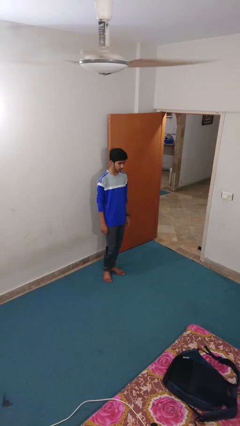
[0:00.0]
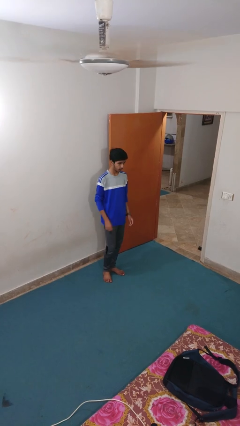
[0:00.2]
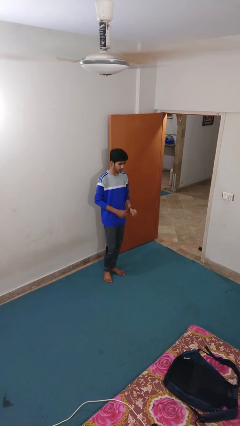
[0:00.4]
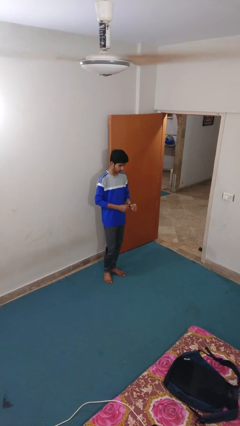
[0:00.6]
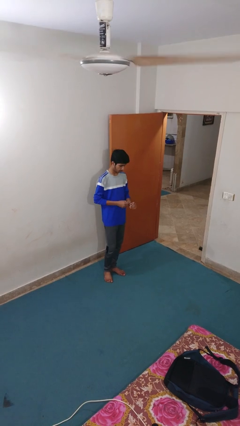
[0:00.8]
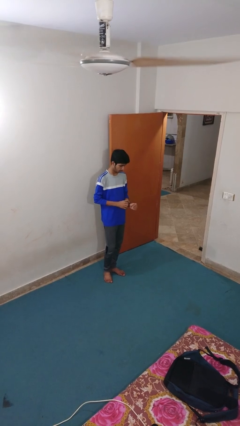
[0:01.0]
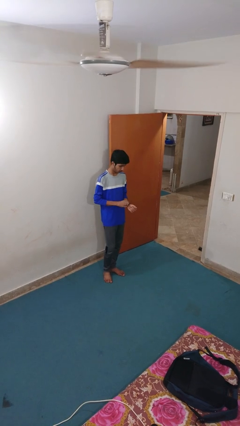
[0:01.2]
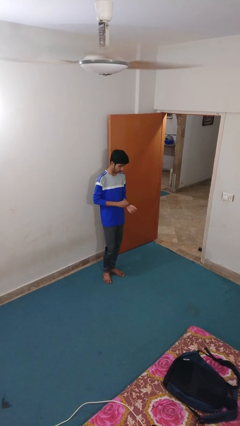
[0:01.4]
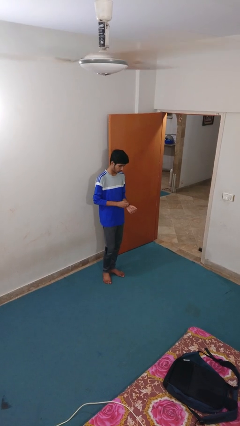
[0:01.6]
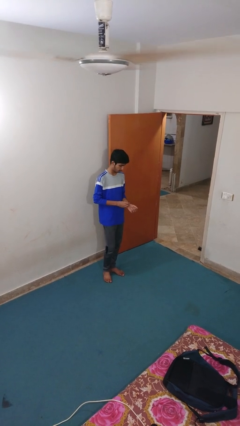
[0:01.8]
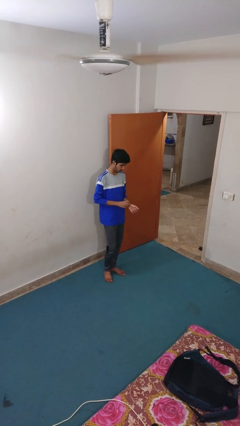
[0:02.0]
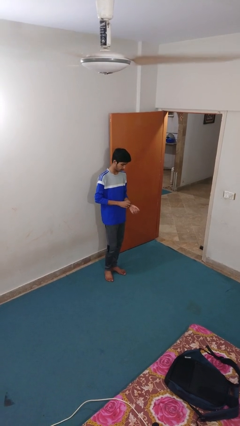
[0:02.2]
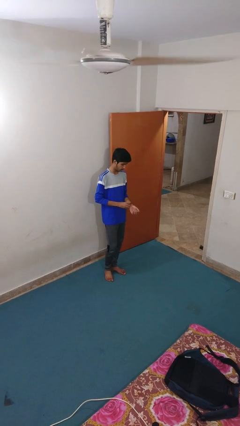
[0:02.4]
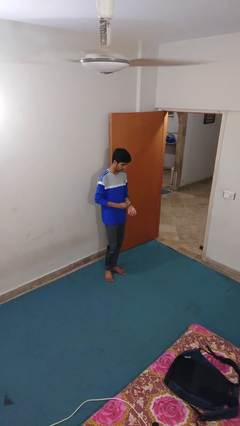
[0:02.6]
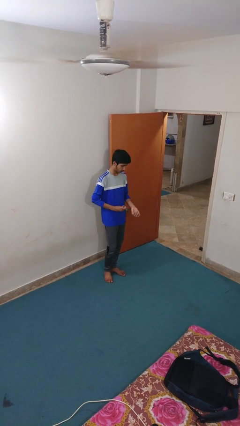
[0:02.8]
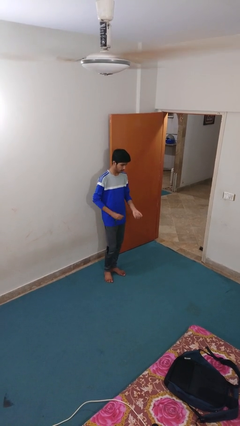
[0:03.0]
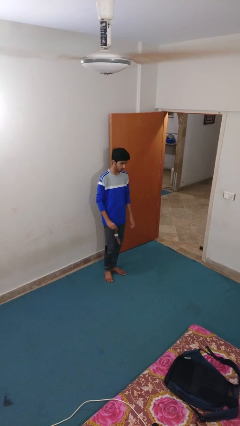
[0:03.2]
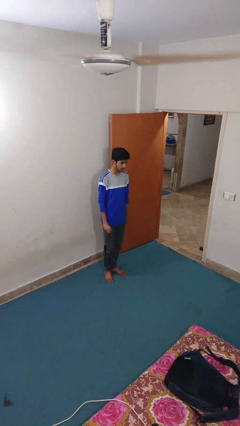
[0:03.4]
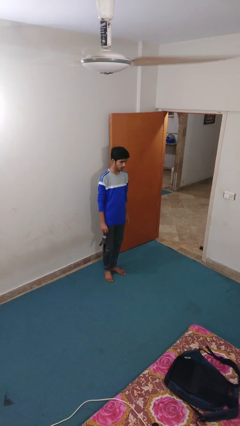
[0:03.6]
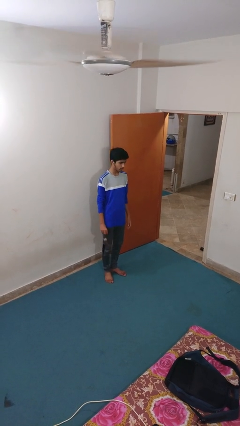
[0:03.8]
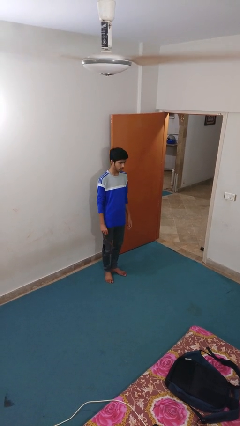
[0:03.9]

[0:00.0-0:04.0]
person takes off wristwatch

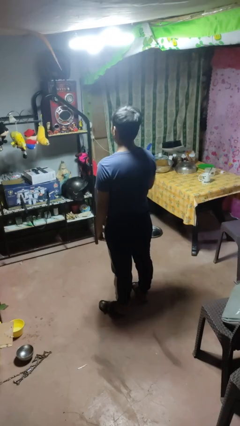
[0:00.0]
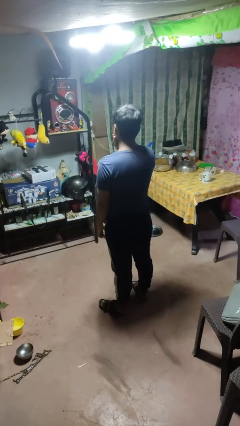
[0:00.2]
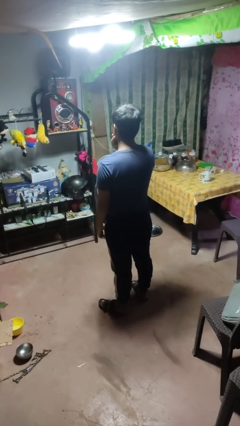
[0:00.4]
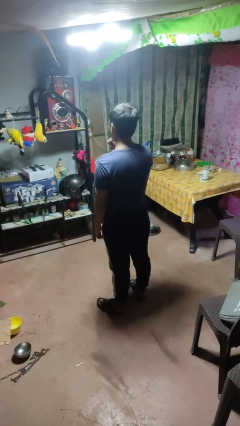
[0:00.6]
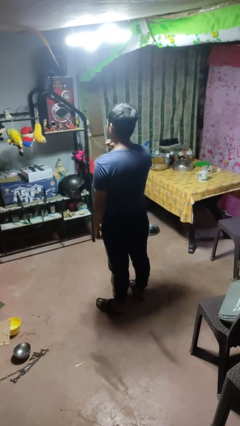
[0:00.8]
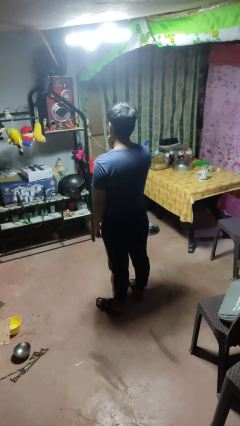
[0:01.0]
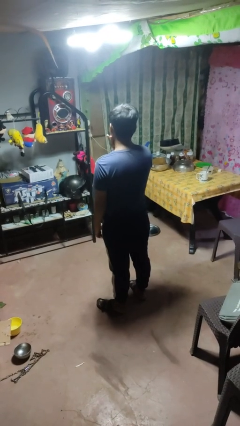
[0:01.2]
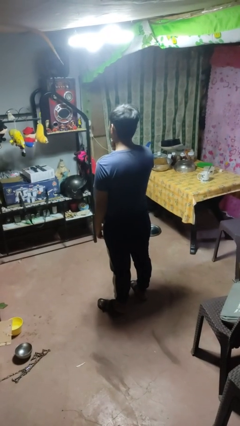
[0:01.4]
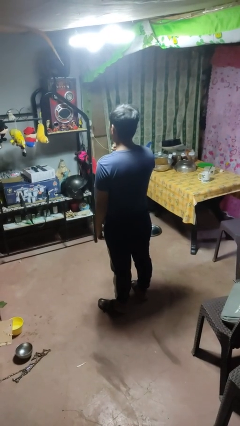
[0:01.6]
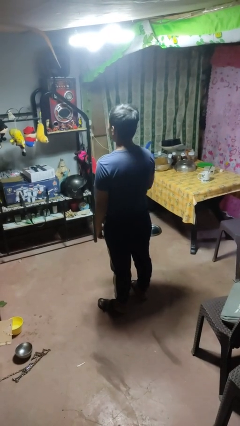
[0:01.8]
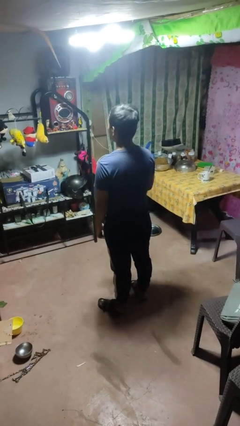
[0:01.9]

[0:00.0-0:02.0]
person strokes chin

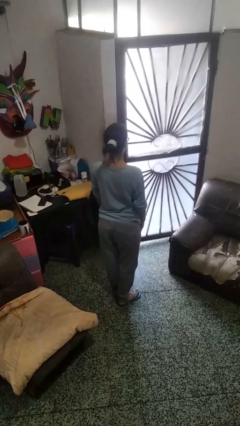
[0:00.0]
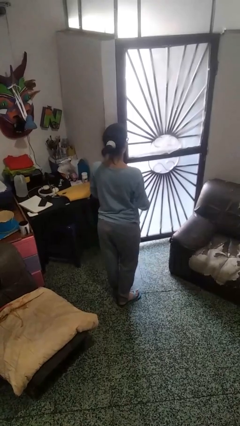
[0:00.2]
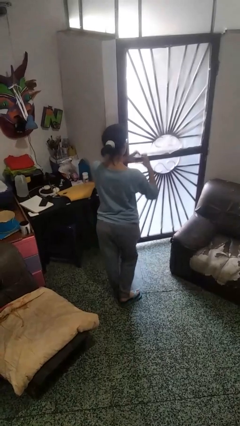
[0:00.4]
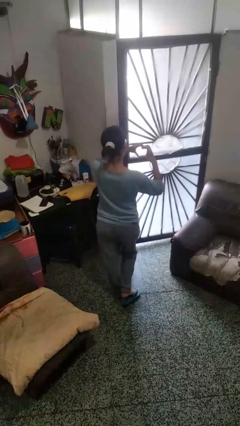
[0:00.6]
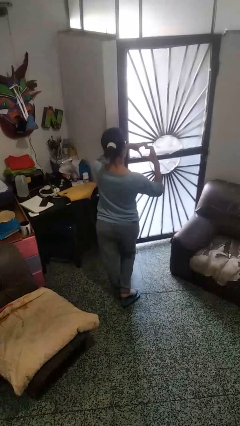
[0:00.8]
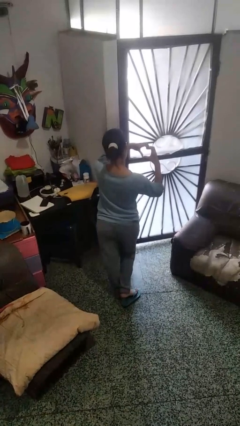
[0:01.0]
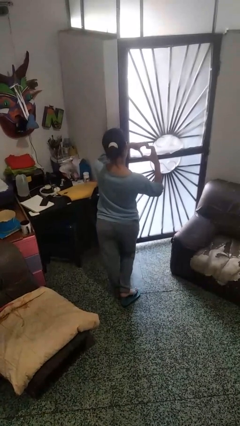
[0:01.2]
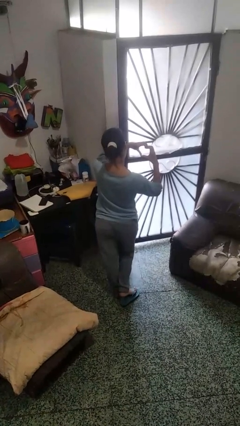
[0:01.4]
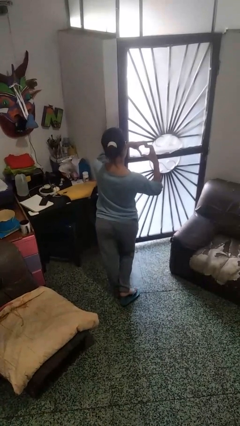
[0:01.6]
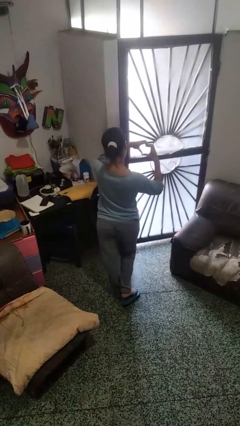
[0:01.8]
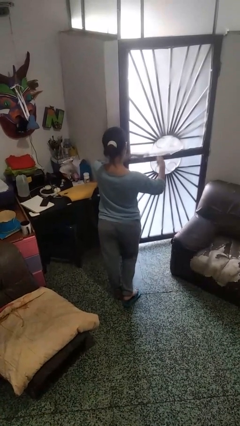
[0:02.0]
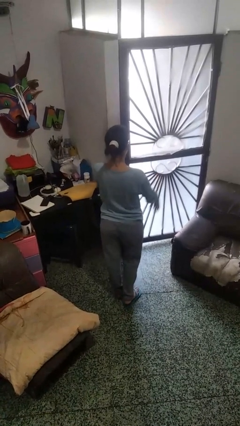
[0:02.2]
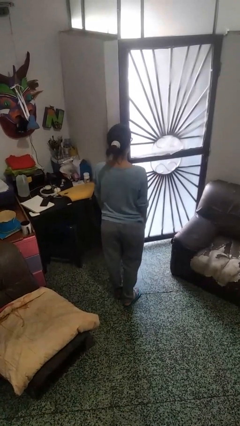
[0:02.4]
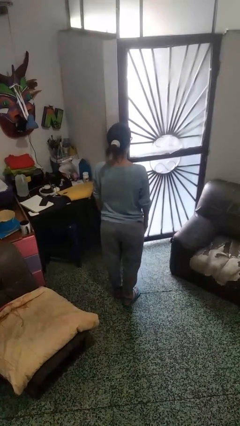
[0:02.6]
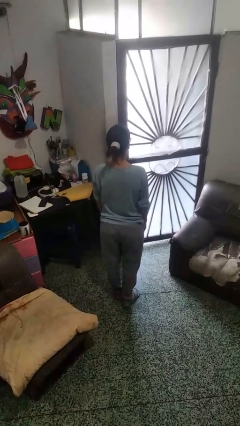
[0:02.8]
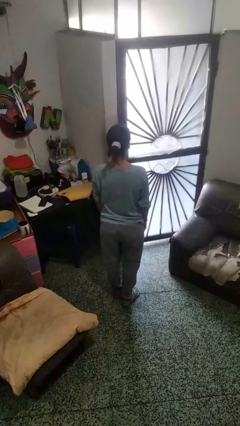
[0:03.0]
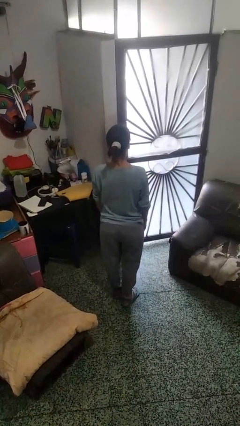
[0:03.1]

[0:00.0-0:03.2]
person gestures heart

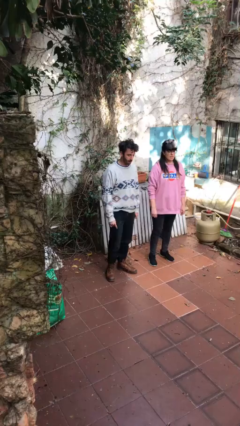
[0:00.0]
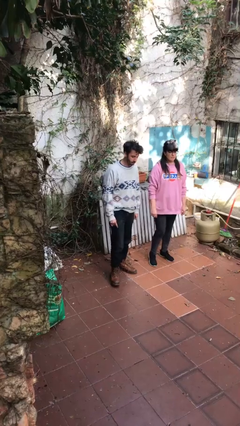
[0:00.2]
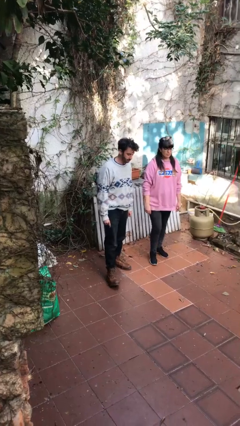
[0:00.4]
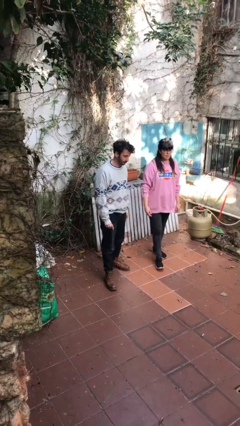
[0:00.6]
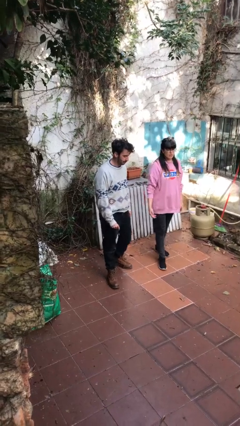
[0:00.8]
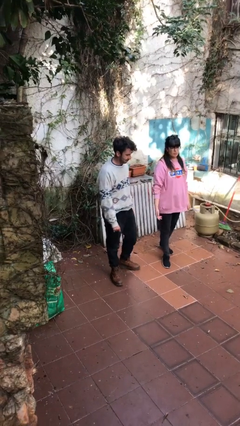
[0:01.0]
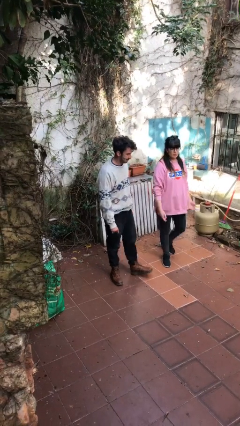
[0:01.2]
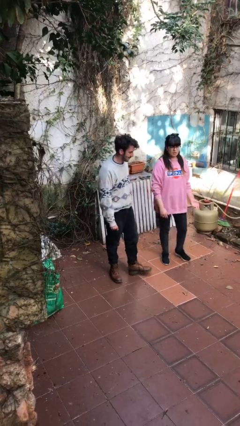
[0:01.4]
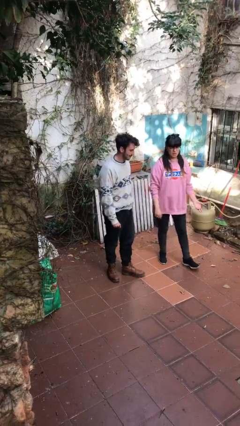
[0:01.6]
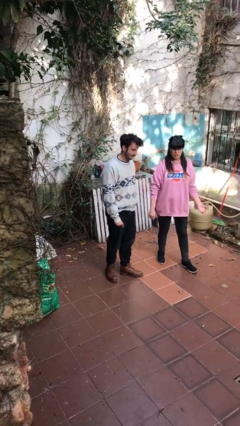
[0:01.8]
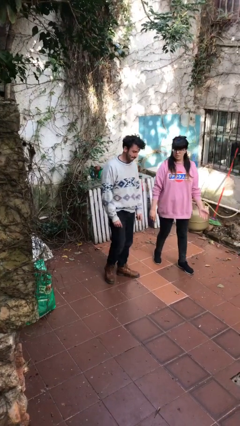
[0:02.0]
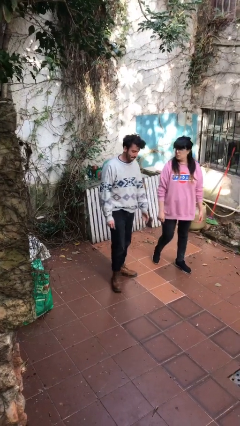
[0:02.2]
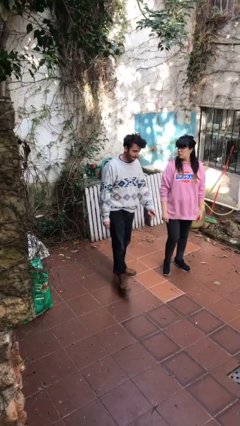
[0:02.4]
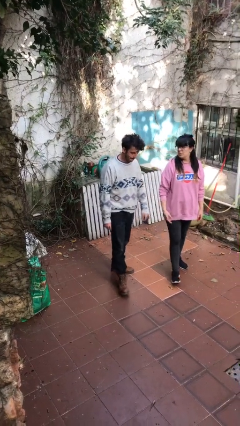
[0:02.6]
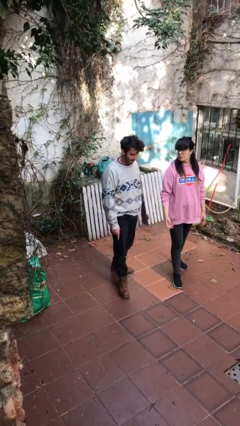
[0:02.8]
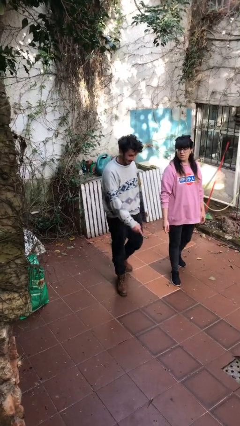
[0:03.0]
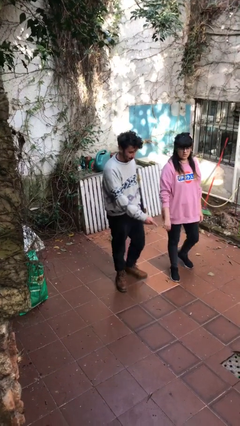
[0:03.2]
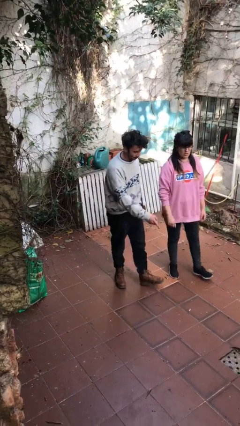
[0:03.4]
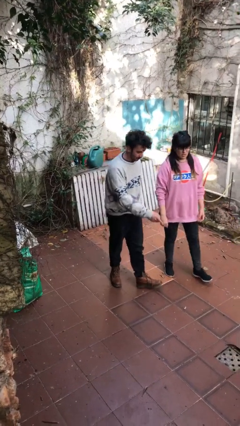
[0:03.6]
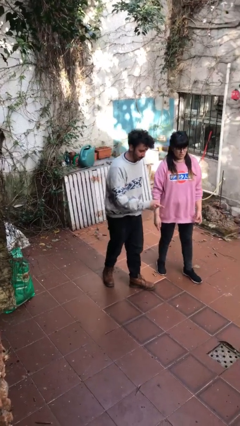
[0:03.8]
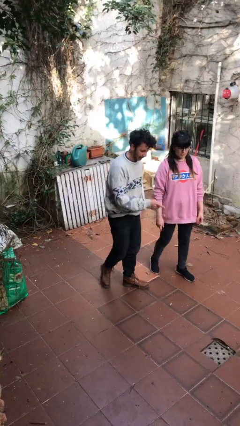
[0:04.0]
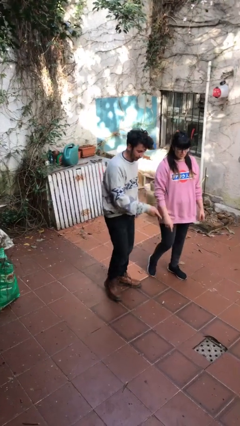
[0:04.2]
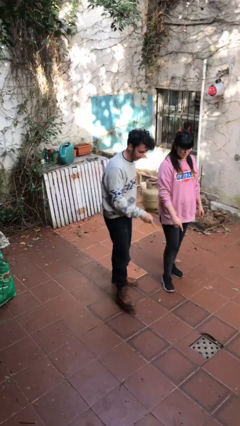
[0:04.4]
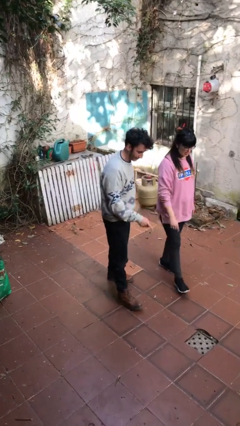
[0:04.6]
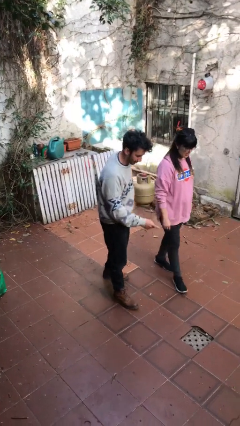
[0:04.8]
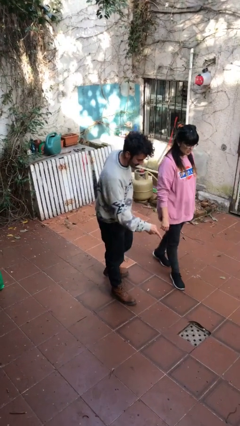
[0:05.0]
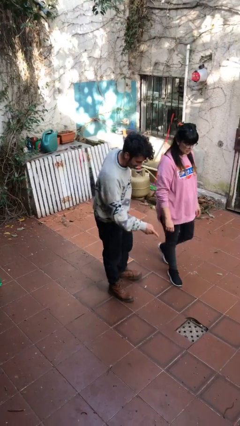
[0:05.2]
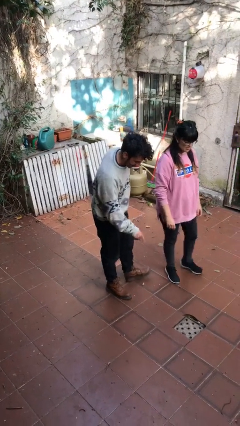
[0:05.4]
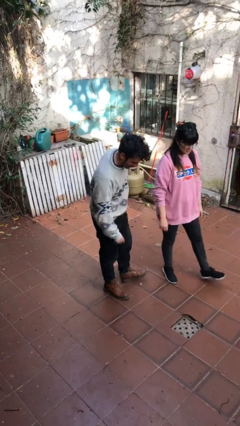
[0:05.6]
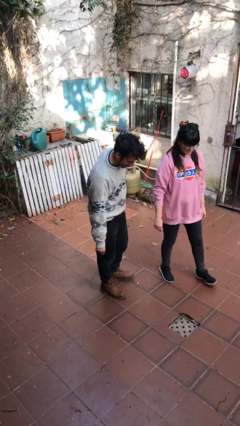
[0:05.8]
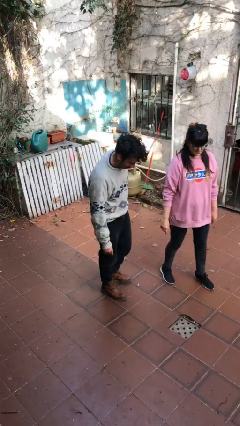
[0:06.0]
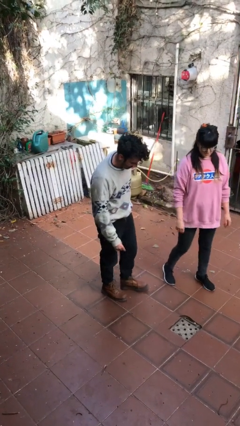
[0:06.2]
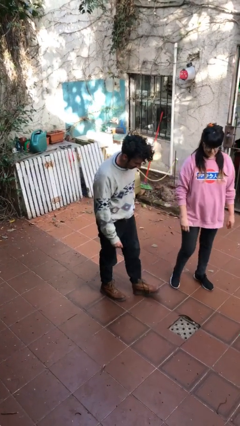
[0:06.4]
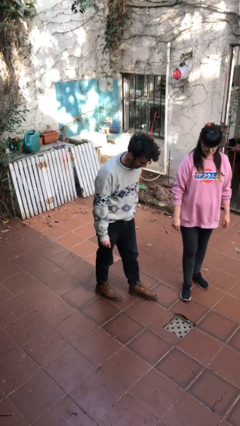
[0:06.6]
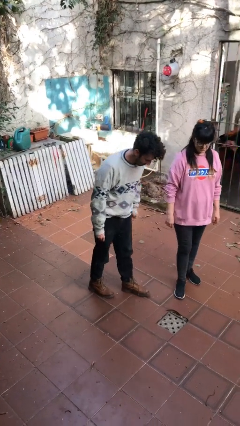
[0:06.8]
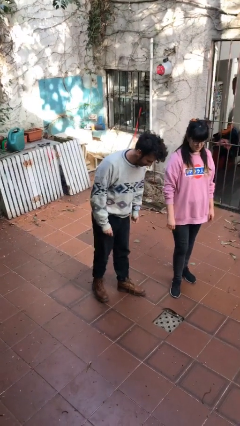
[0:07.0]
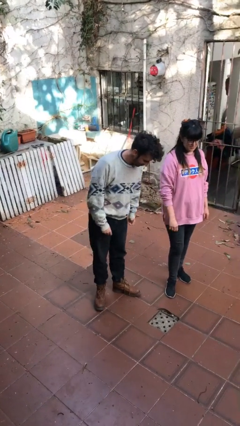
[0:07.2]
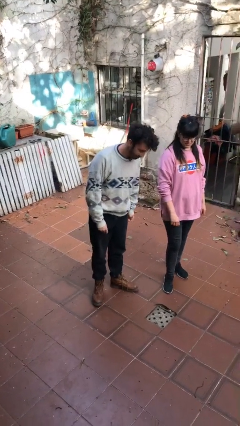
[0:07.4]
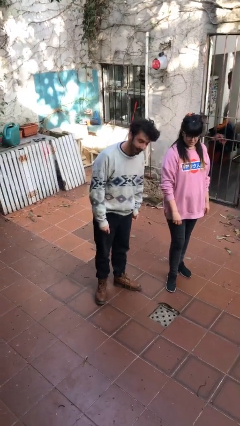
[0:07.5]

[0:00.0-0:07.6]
person talks to person

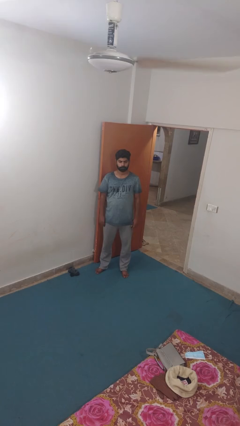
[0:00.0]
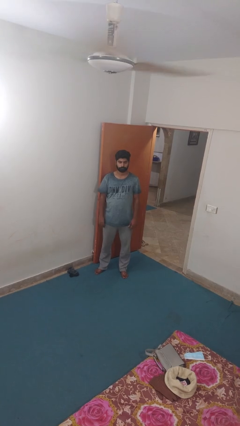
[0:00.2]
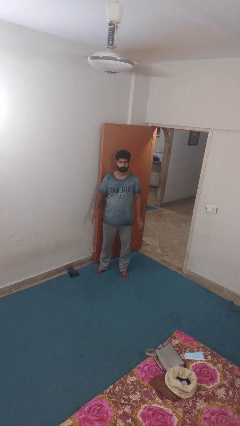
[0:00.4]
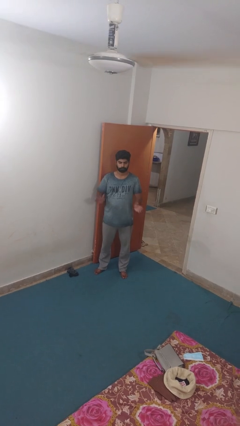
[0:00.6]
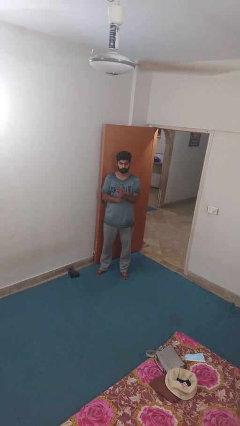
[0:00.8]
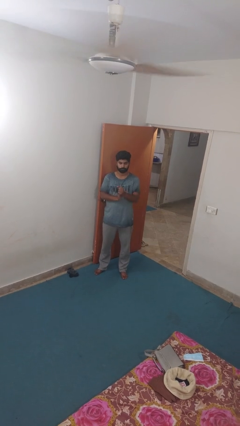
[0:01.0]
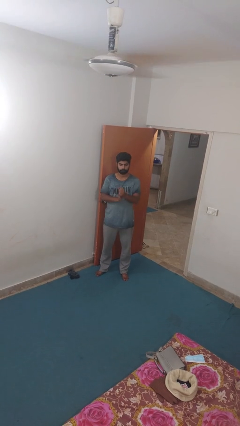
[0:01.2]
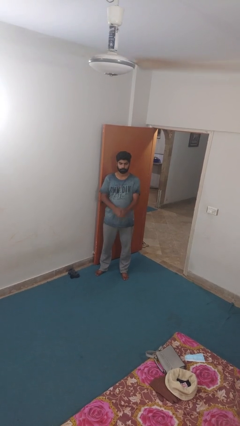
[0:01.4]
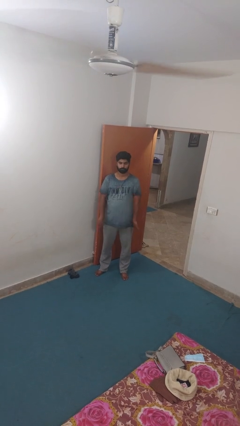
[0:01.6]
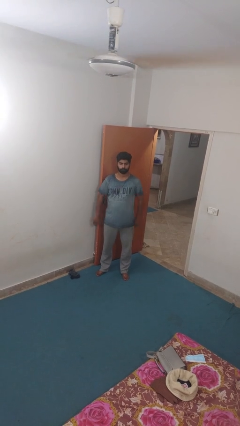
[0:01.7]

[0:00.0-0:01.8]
person claps hands
